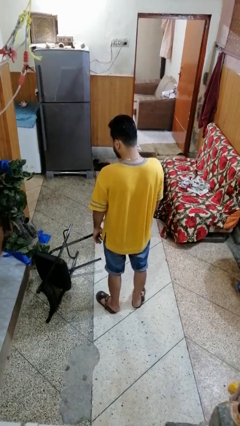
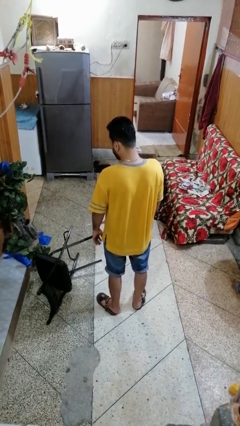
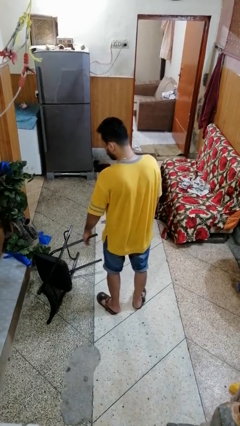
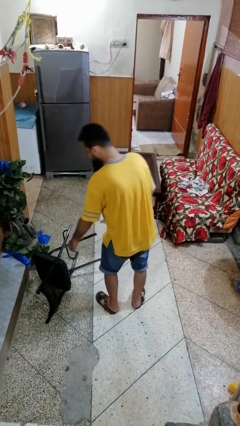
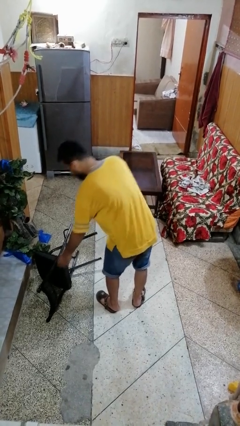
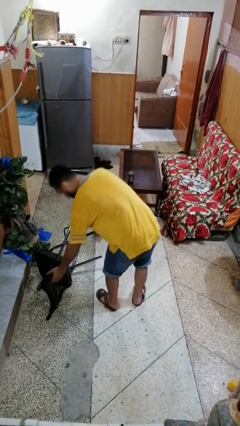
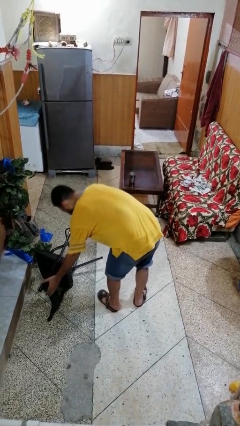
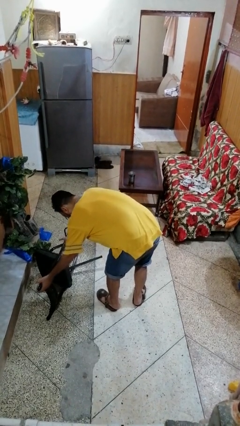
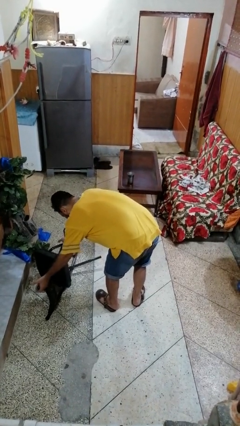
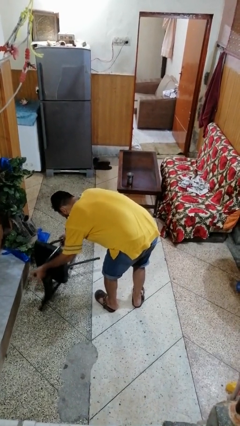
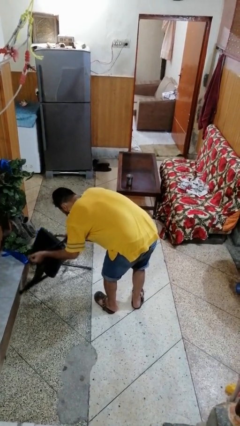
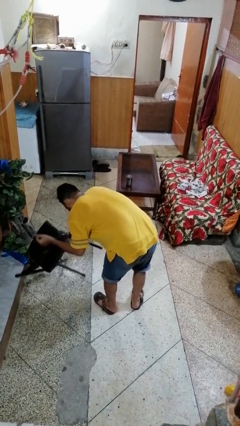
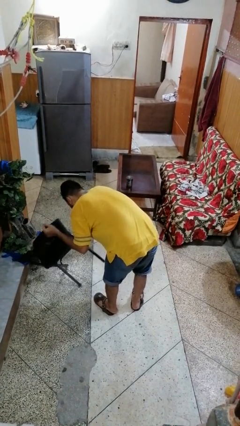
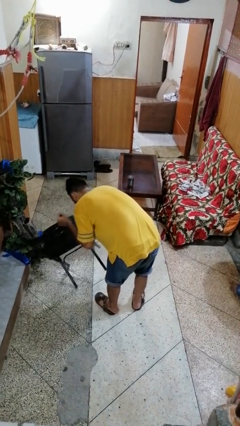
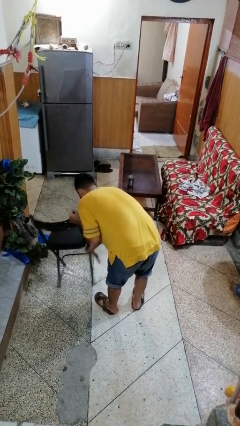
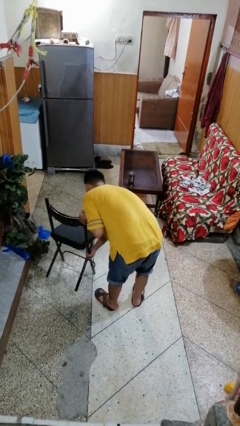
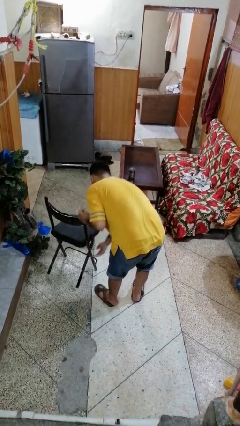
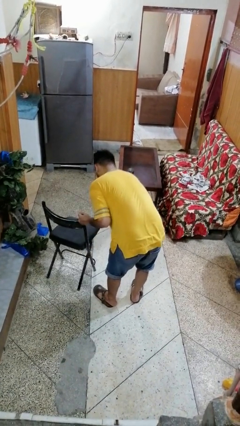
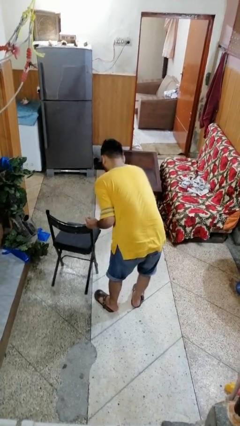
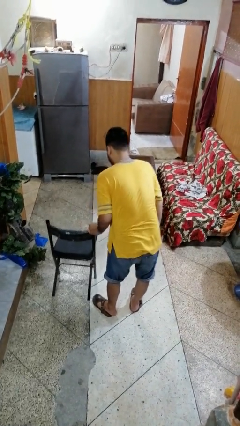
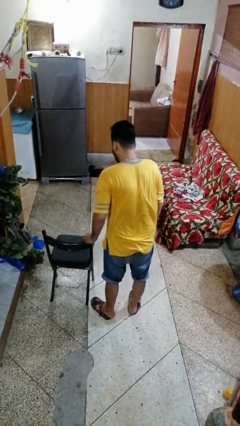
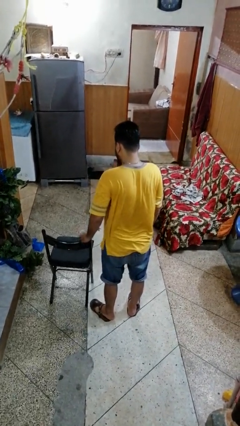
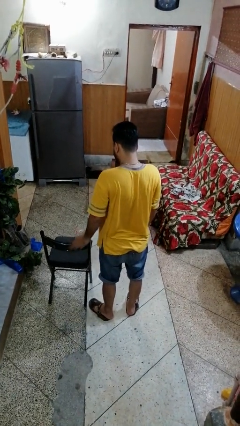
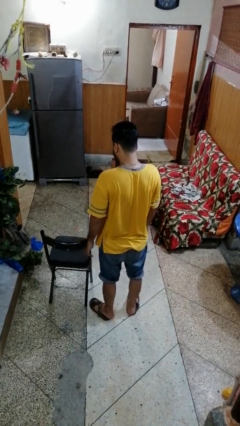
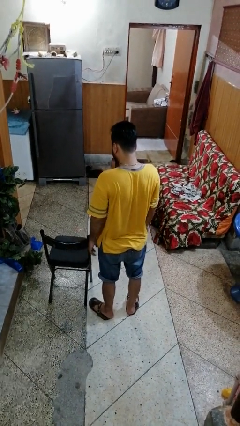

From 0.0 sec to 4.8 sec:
person sets upright furniture

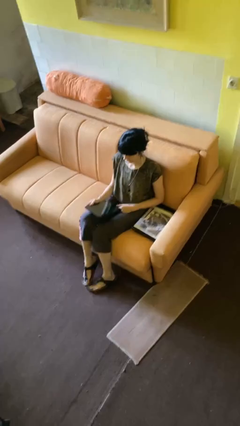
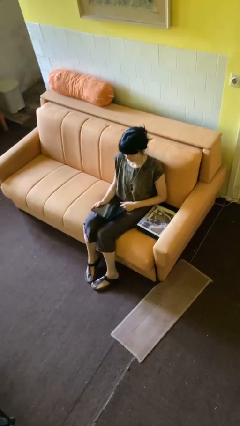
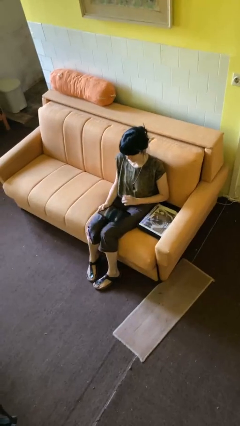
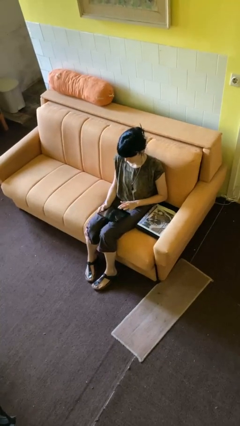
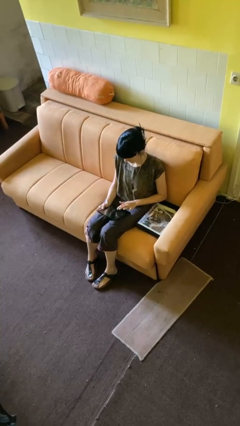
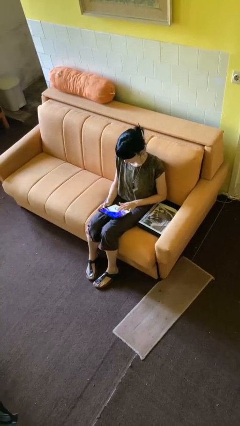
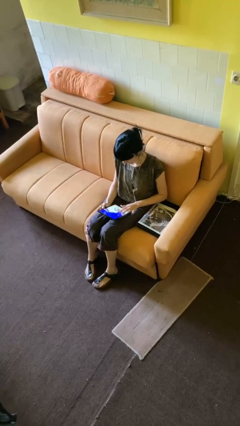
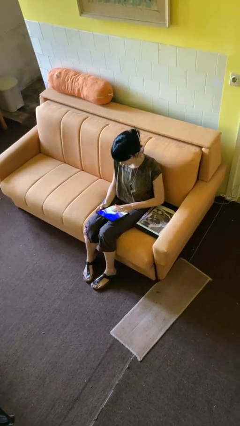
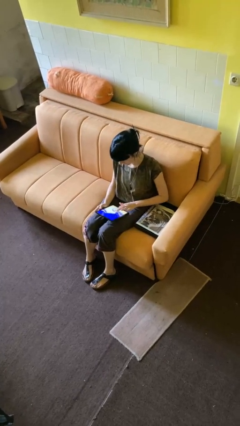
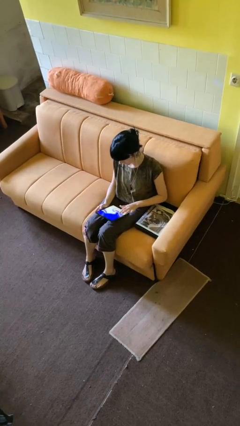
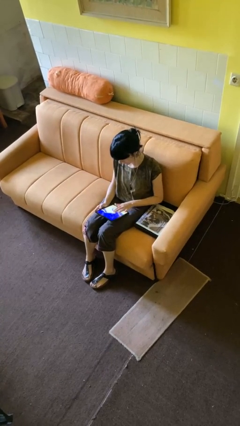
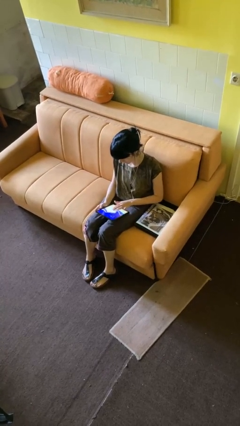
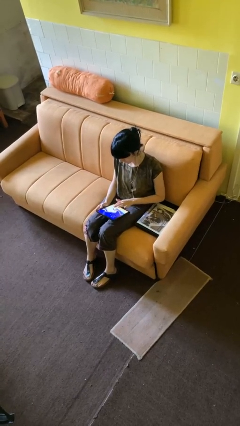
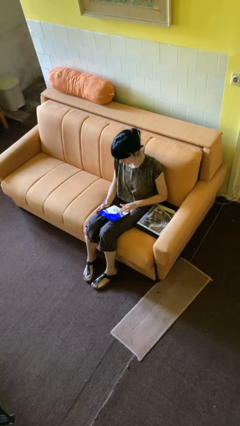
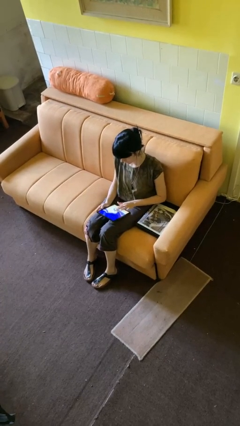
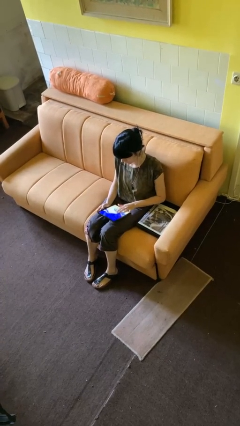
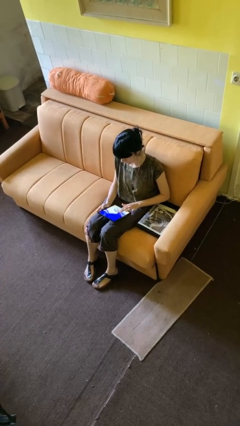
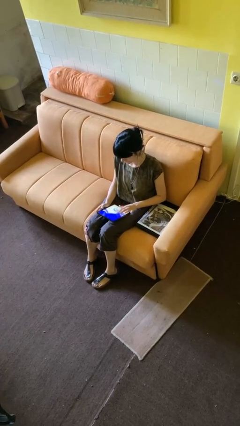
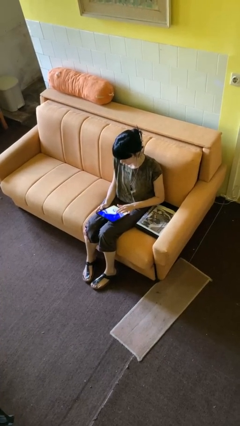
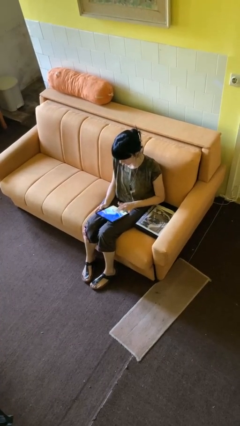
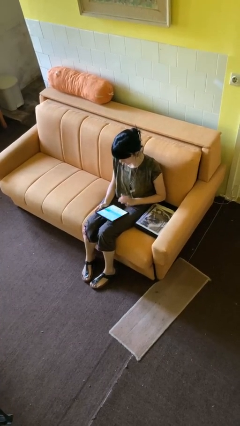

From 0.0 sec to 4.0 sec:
person interacts with tablet

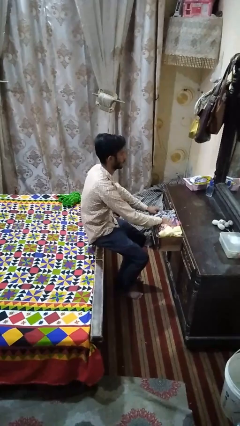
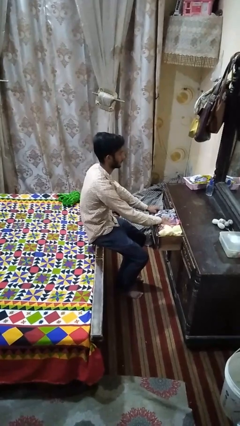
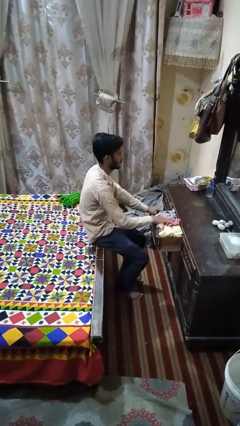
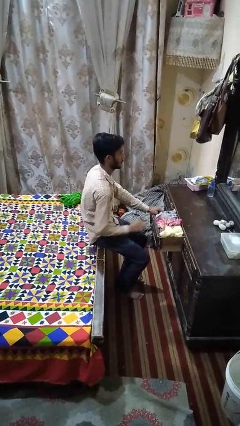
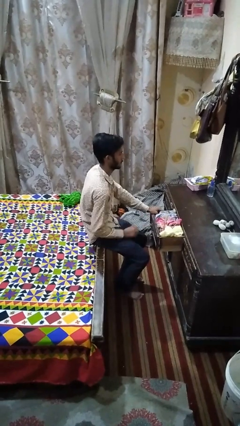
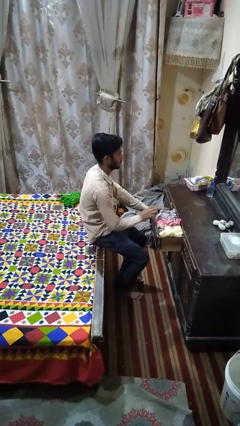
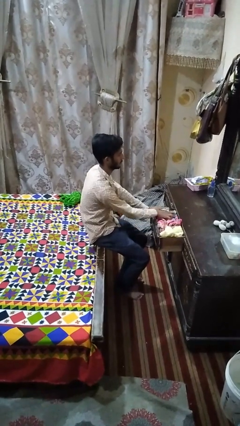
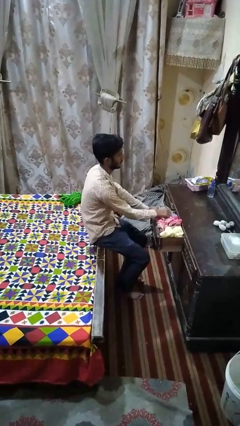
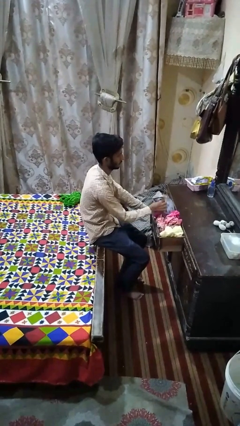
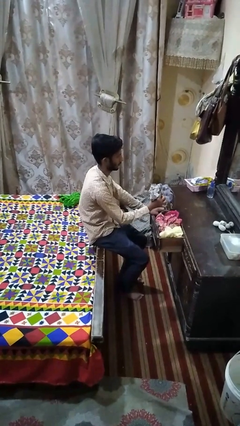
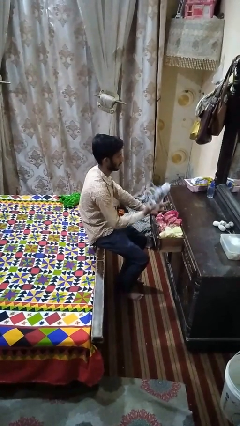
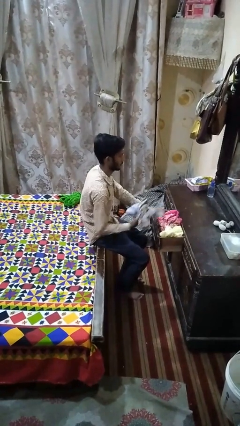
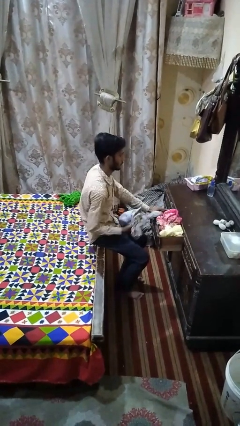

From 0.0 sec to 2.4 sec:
person takes clothes from dresser

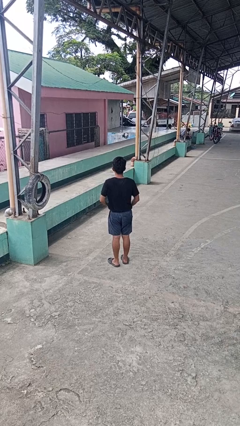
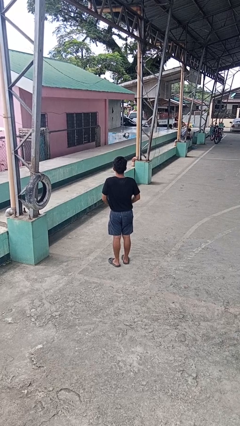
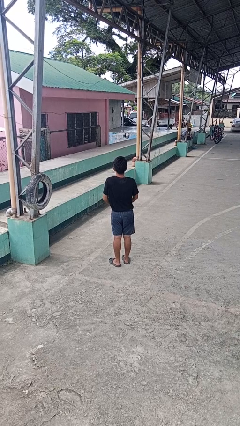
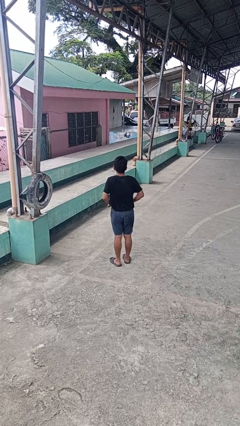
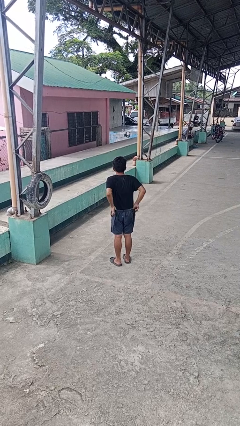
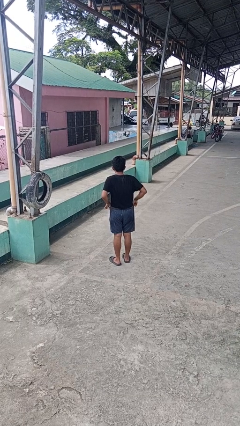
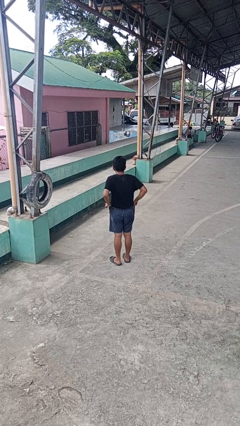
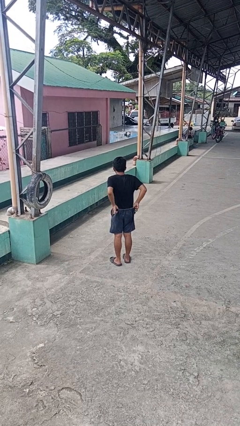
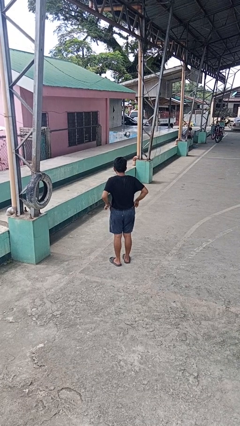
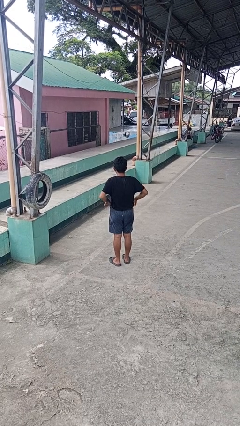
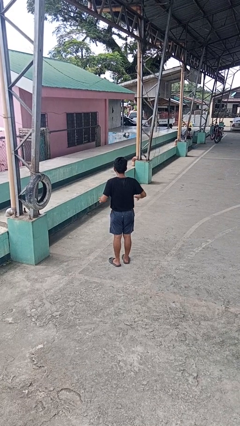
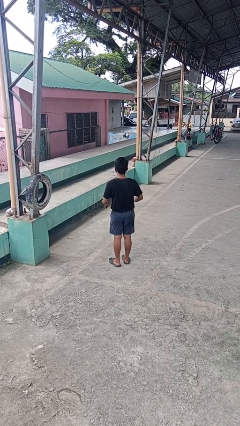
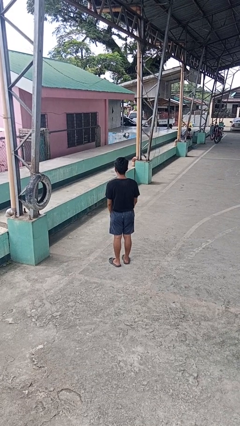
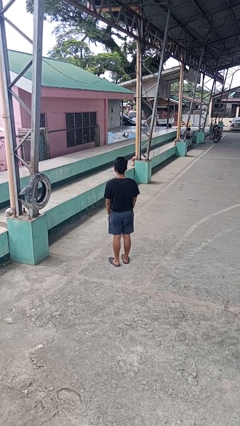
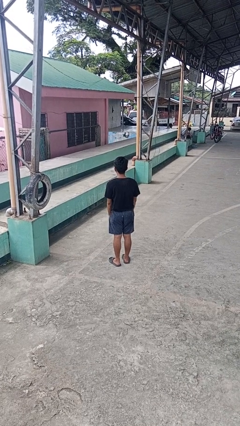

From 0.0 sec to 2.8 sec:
person hikes up pants

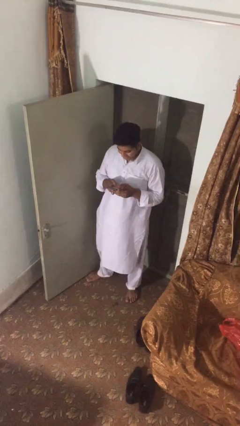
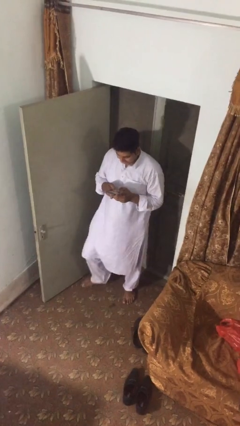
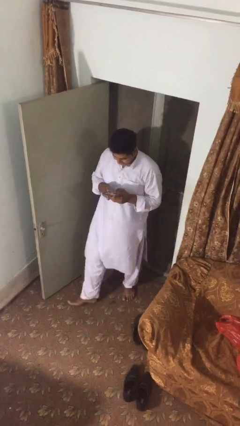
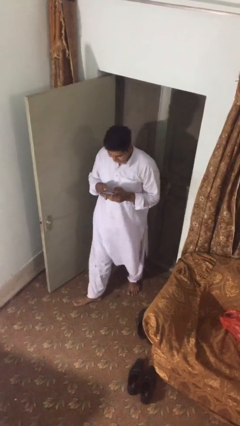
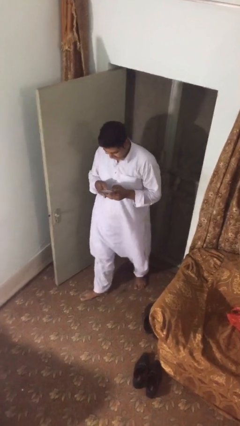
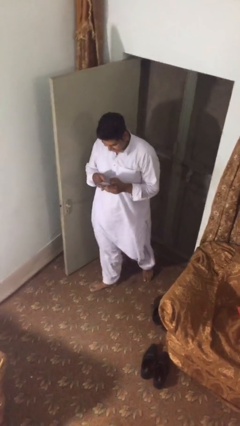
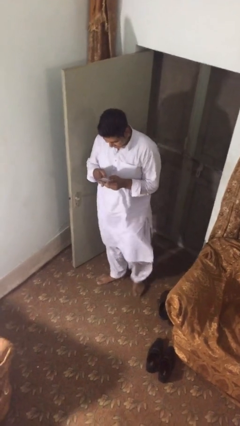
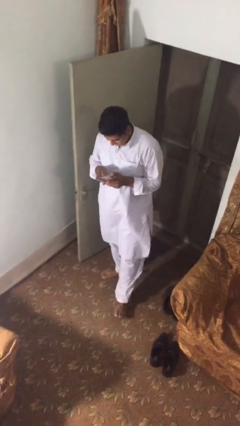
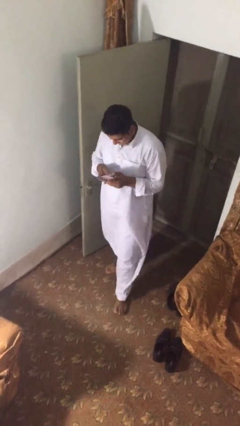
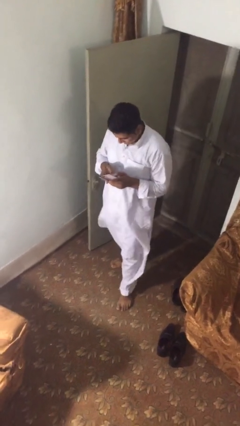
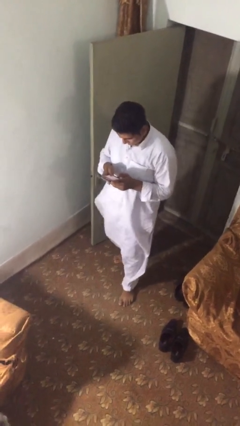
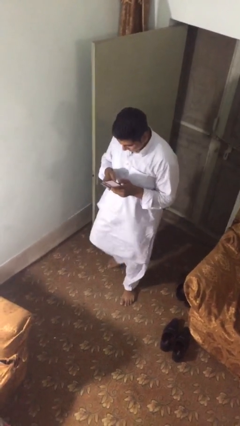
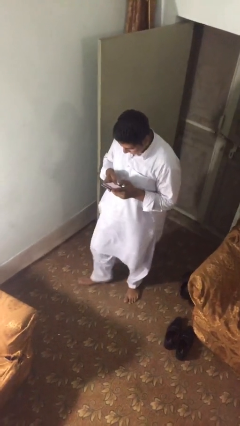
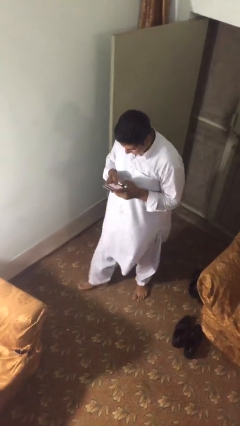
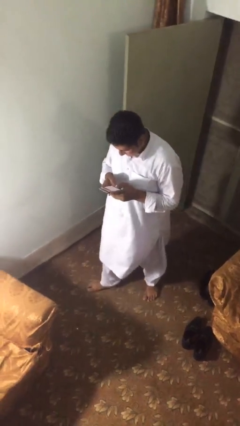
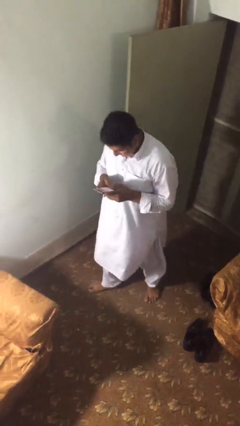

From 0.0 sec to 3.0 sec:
person texts on phone

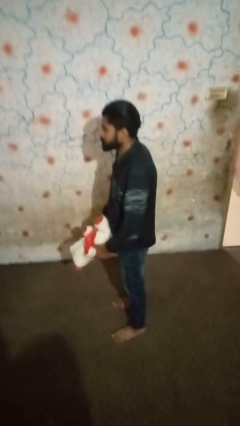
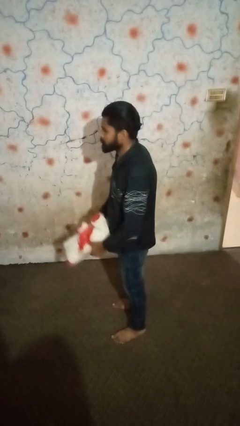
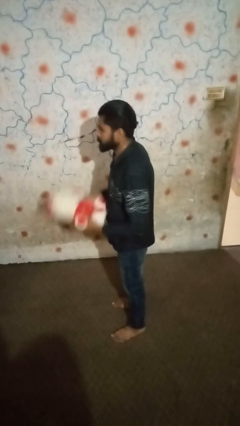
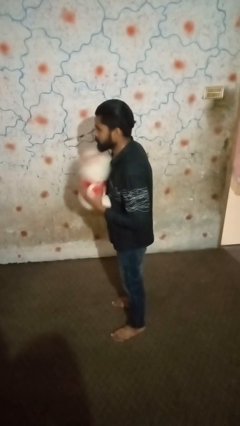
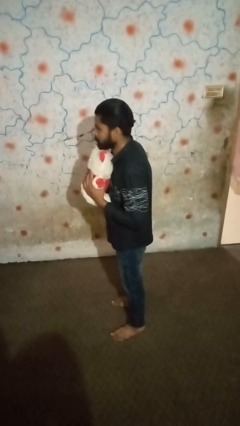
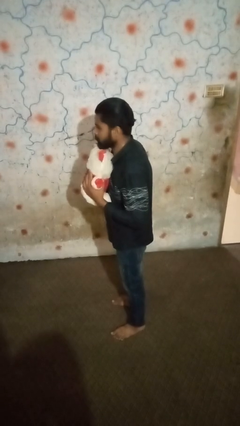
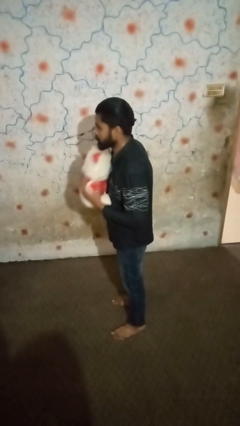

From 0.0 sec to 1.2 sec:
person hugs stuffed animal
